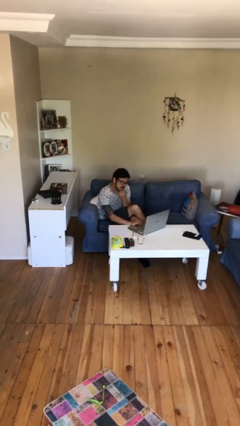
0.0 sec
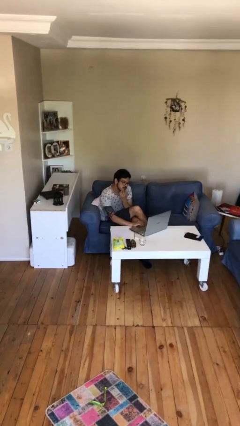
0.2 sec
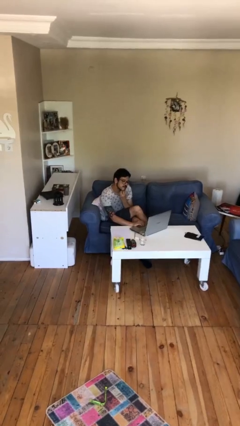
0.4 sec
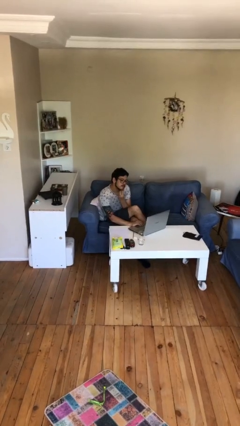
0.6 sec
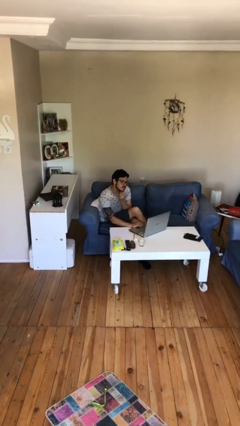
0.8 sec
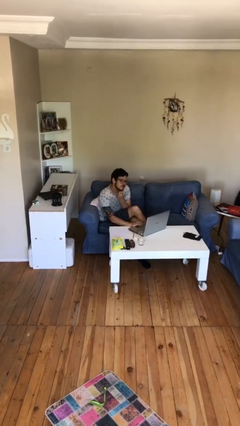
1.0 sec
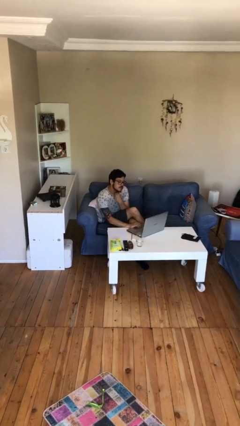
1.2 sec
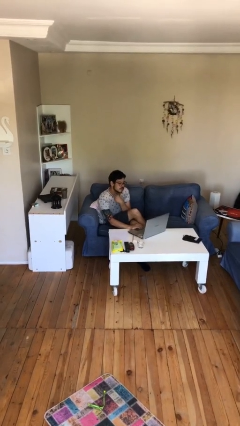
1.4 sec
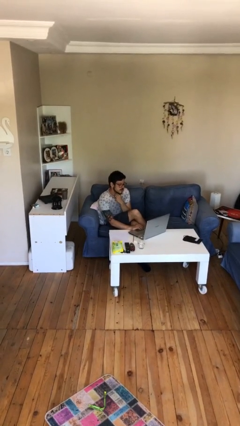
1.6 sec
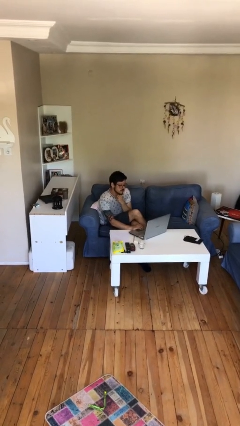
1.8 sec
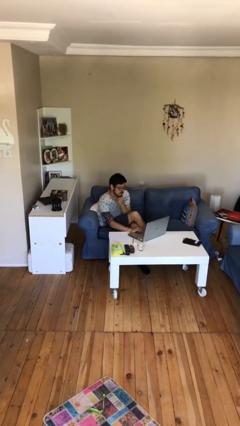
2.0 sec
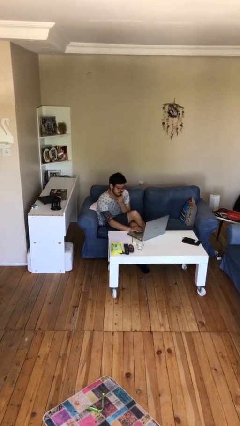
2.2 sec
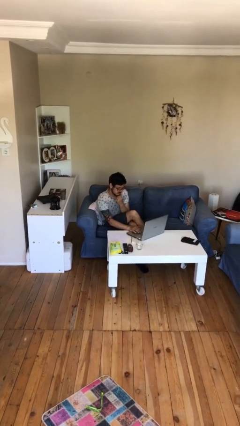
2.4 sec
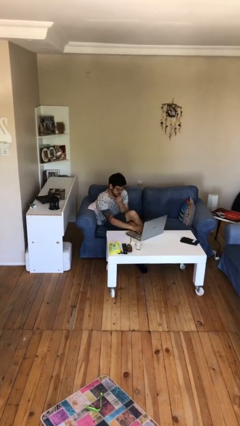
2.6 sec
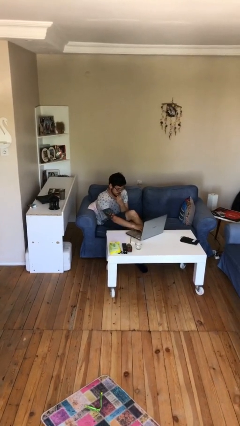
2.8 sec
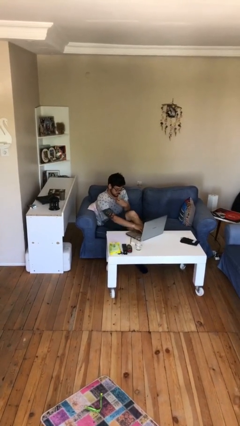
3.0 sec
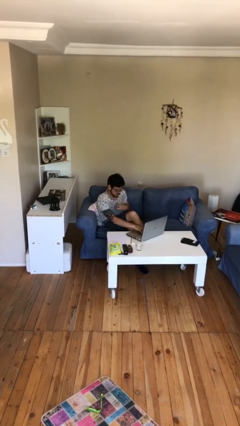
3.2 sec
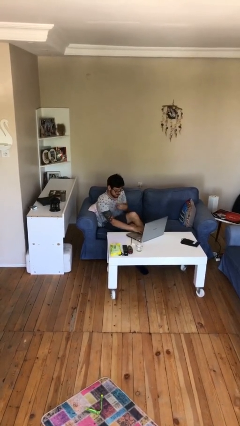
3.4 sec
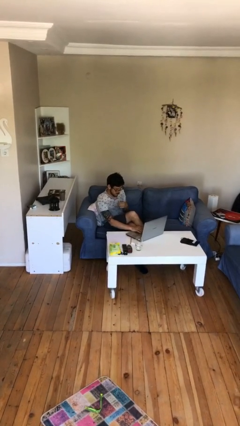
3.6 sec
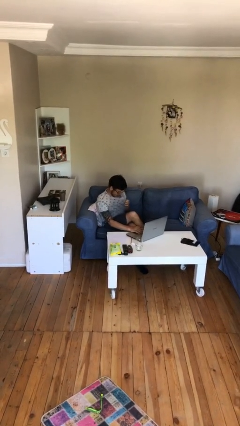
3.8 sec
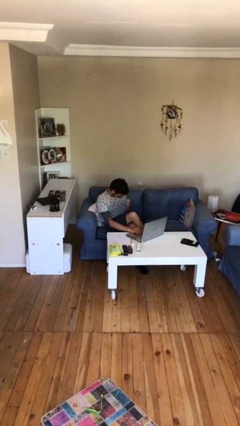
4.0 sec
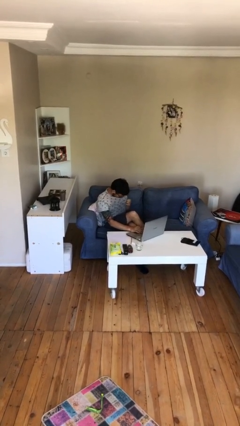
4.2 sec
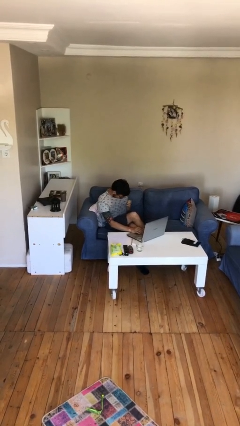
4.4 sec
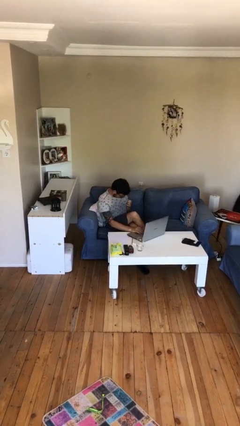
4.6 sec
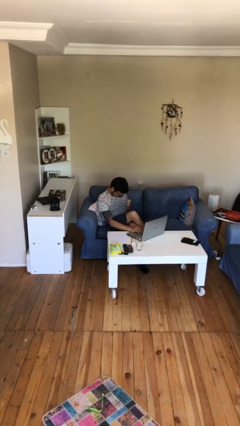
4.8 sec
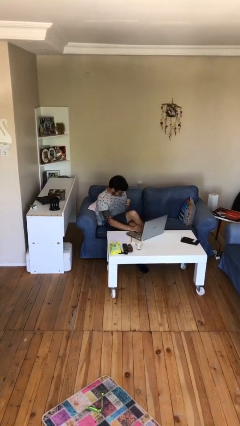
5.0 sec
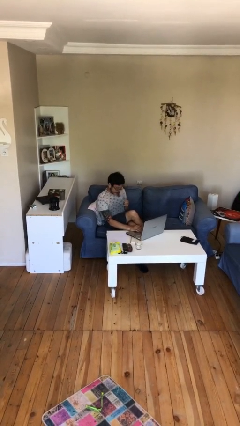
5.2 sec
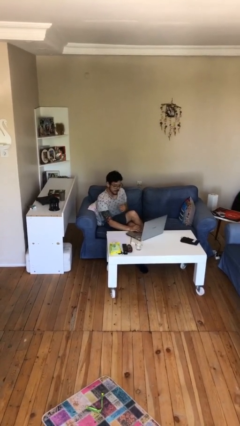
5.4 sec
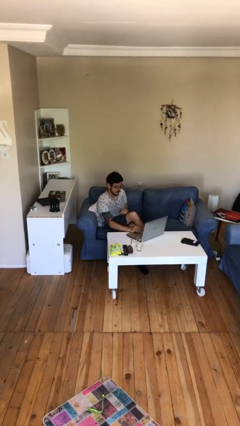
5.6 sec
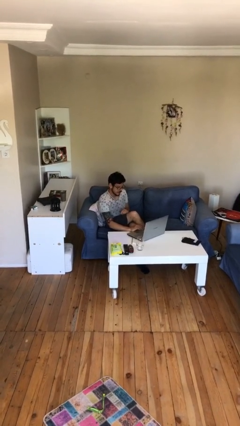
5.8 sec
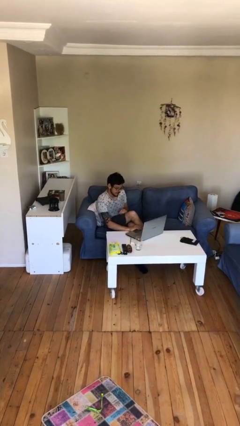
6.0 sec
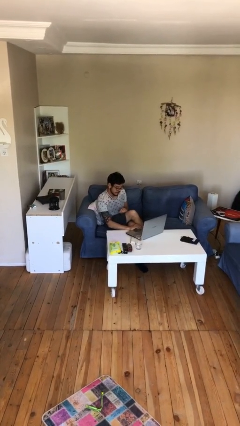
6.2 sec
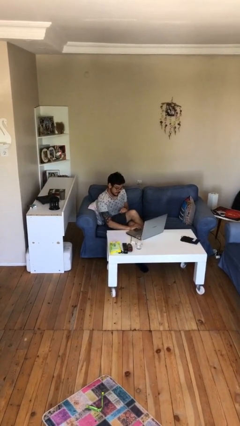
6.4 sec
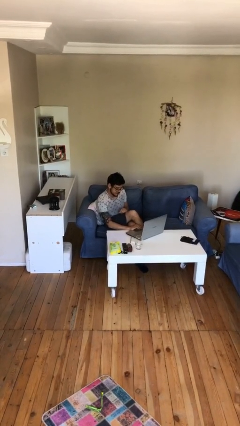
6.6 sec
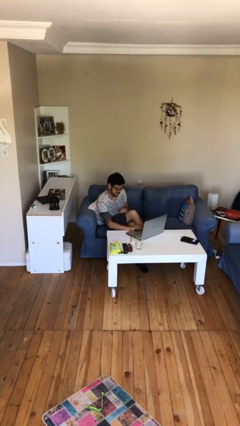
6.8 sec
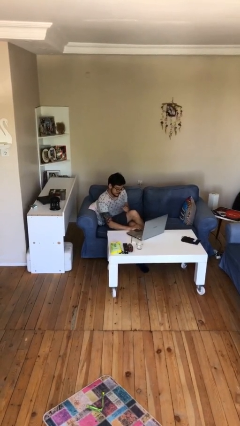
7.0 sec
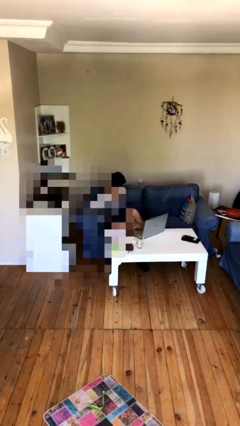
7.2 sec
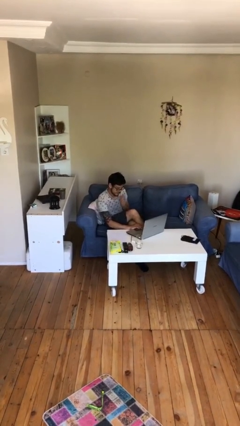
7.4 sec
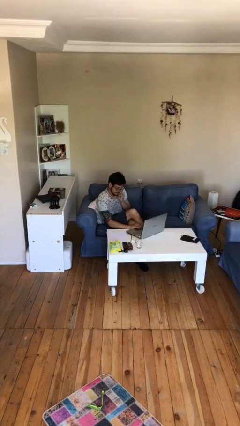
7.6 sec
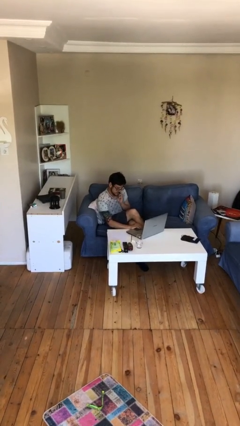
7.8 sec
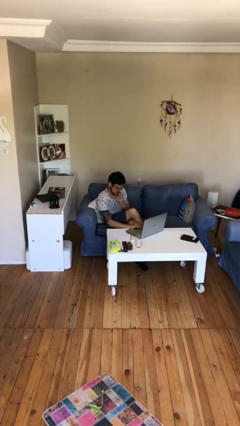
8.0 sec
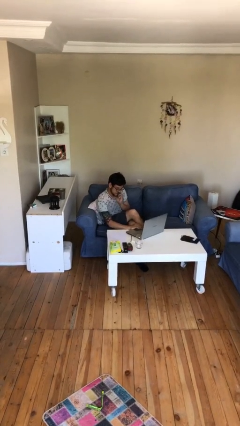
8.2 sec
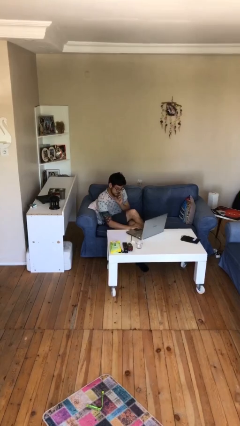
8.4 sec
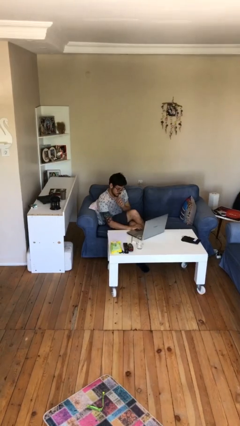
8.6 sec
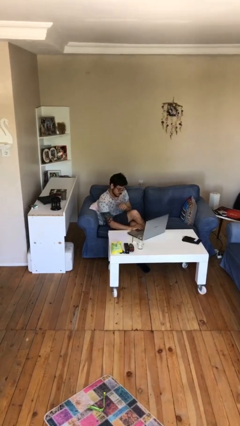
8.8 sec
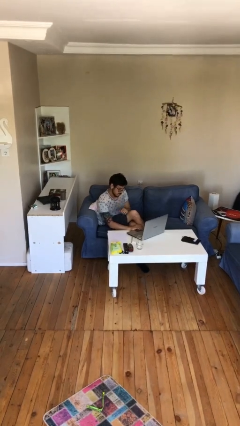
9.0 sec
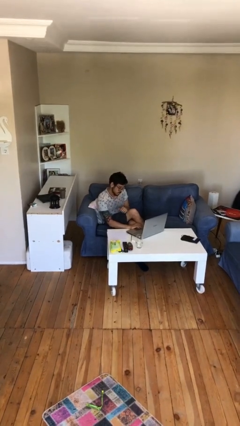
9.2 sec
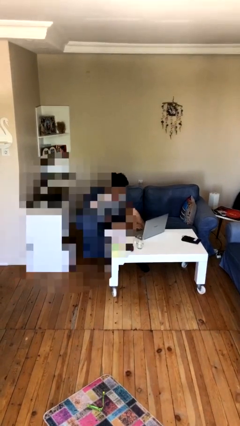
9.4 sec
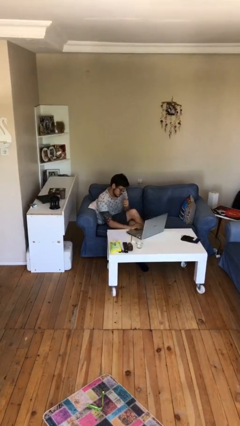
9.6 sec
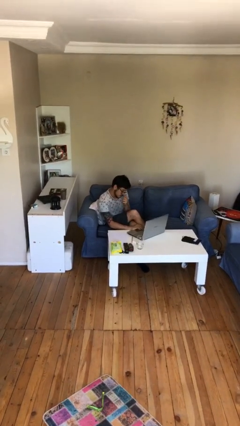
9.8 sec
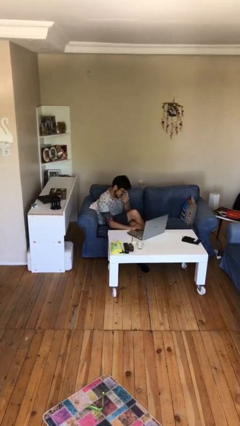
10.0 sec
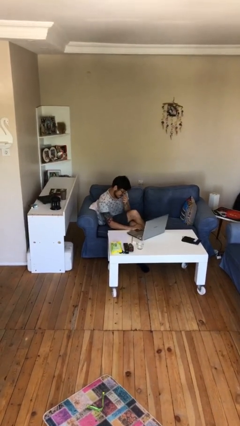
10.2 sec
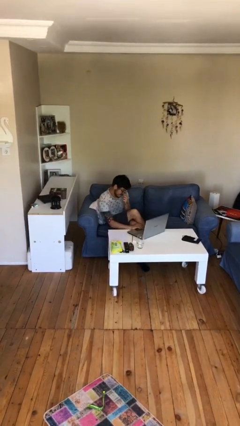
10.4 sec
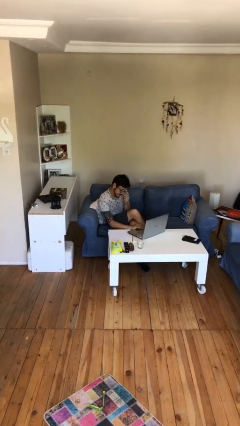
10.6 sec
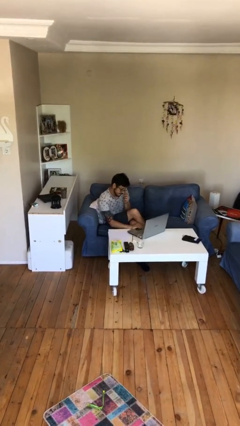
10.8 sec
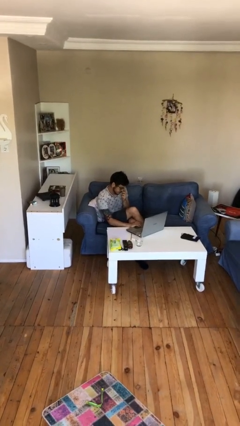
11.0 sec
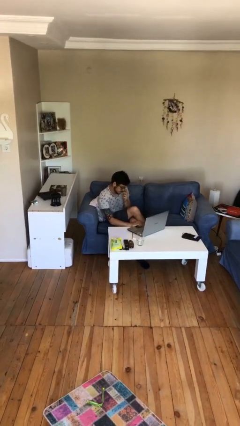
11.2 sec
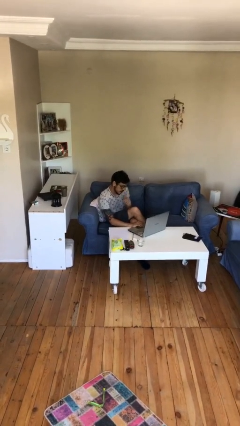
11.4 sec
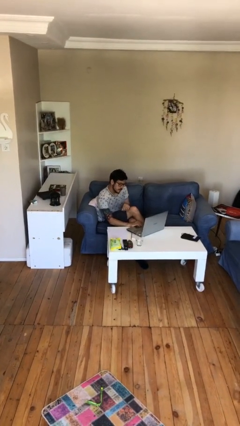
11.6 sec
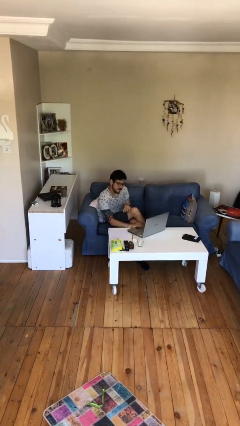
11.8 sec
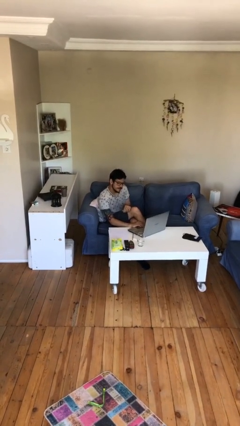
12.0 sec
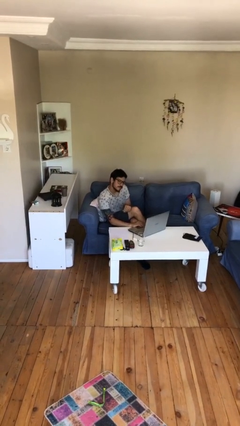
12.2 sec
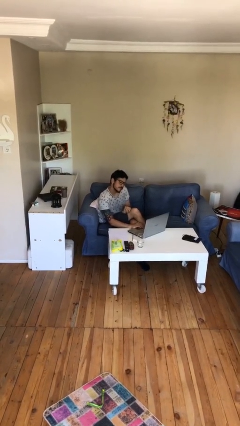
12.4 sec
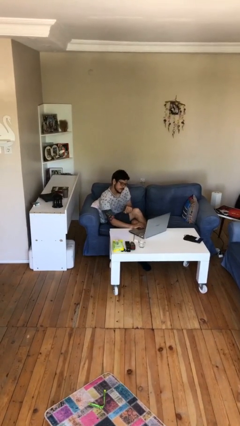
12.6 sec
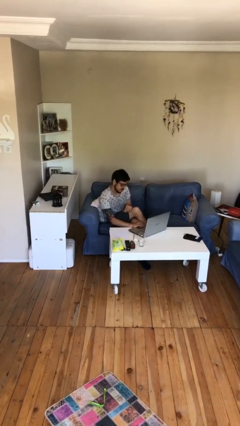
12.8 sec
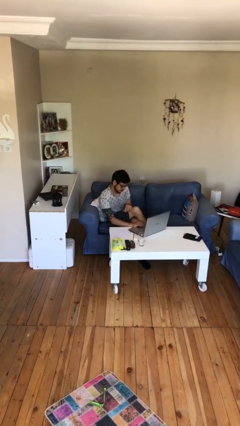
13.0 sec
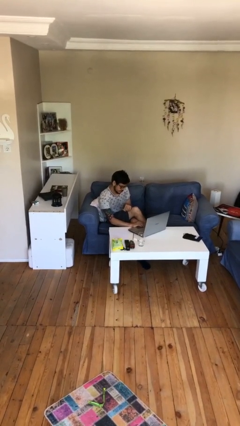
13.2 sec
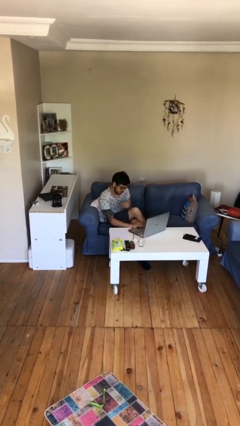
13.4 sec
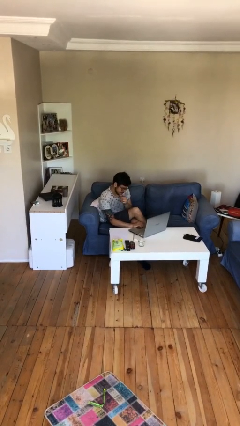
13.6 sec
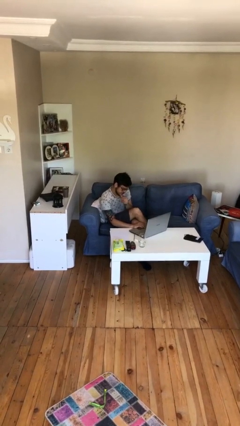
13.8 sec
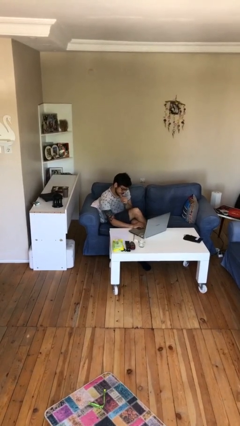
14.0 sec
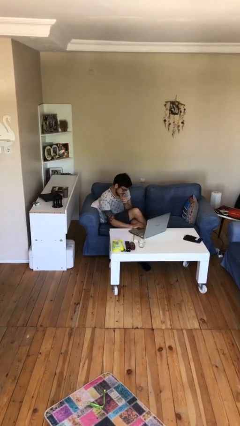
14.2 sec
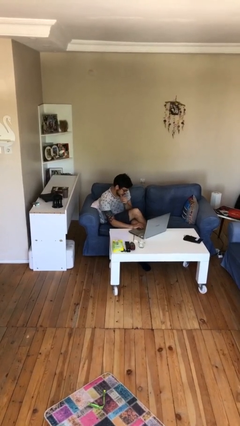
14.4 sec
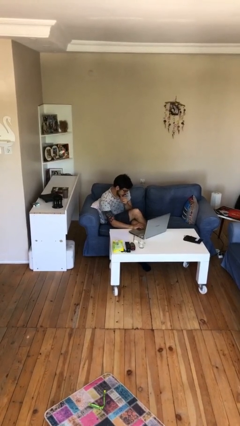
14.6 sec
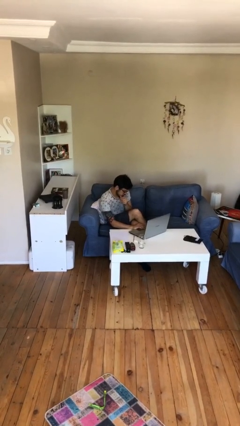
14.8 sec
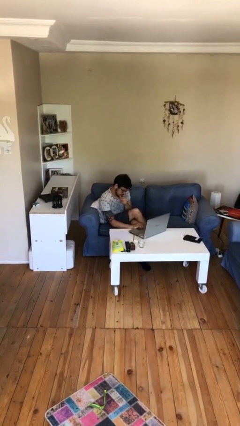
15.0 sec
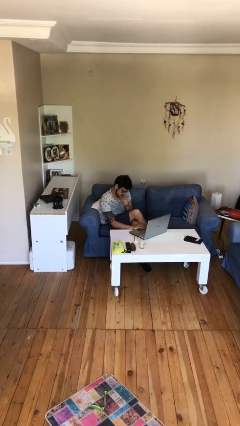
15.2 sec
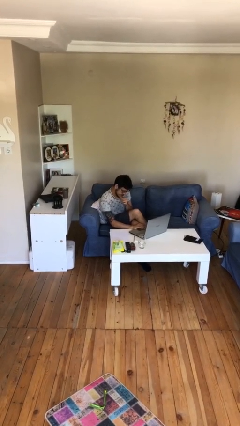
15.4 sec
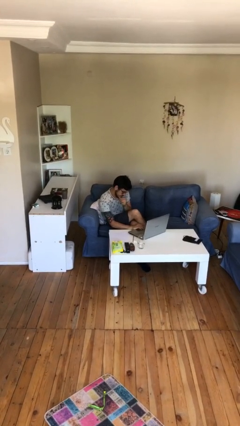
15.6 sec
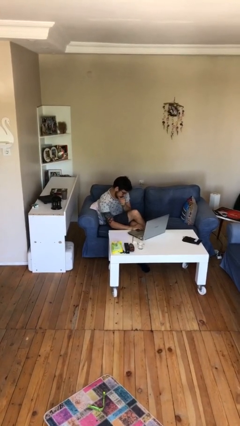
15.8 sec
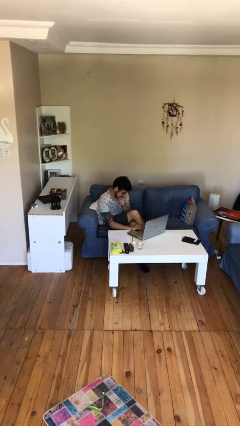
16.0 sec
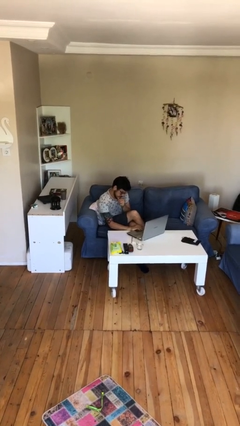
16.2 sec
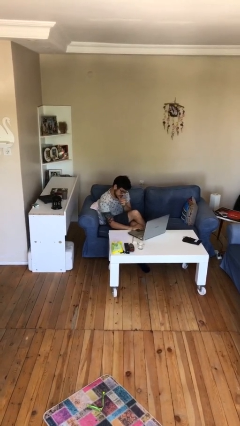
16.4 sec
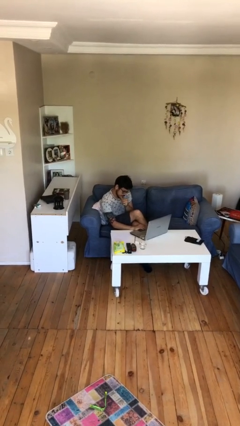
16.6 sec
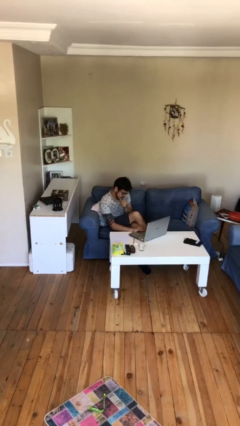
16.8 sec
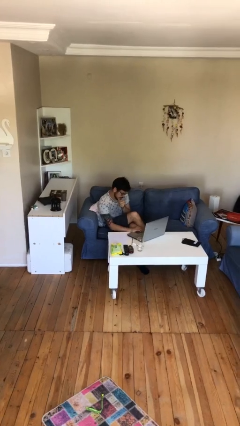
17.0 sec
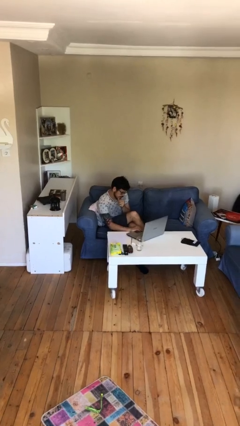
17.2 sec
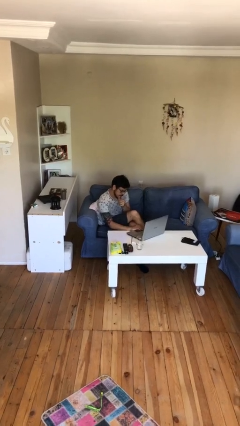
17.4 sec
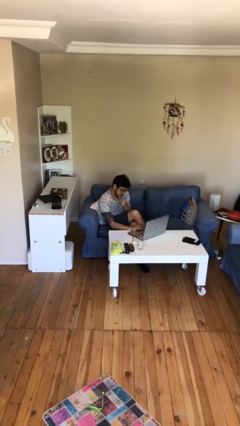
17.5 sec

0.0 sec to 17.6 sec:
person interacts with laptop

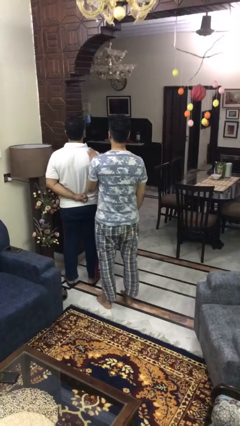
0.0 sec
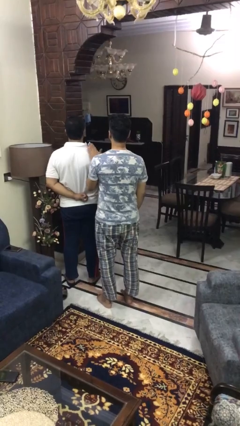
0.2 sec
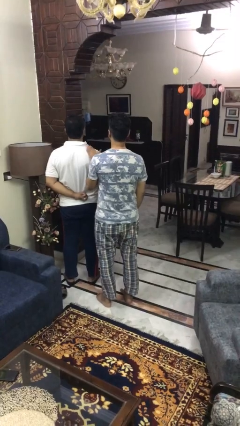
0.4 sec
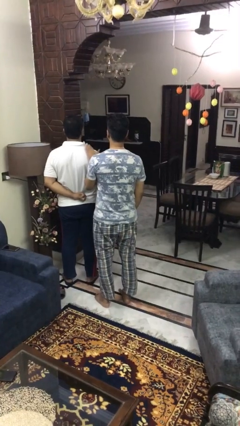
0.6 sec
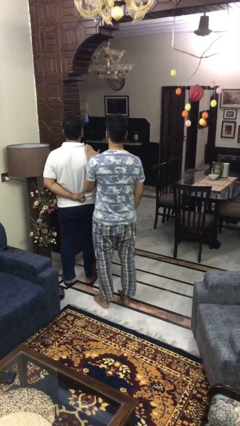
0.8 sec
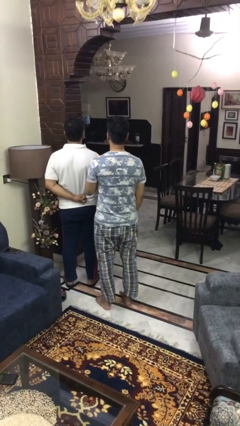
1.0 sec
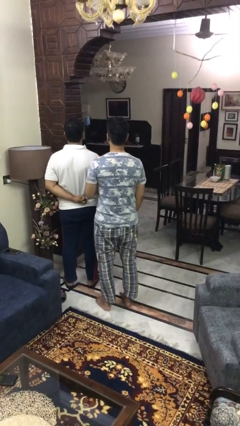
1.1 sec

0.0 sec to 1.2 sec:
person touches back of person
